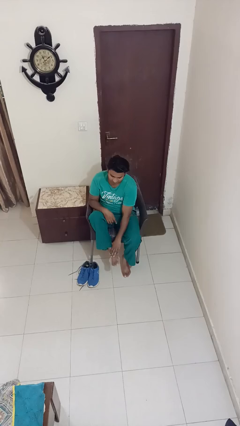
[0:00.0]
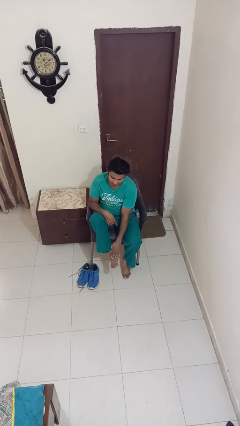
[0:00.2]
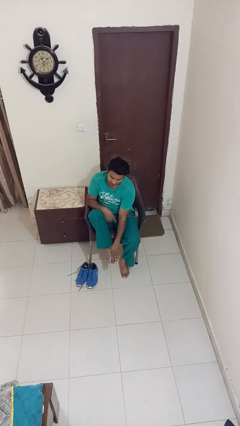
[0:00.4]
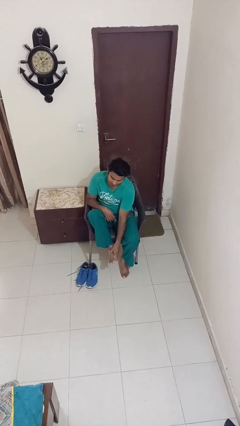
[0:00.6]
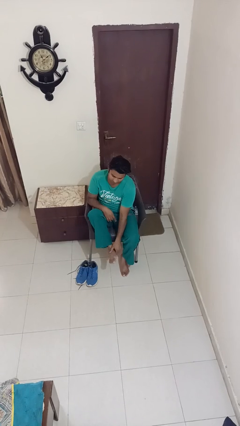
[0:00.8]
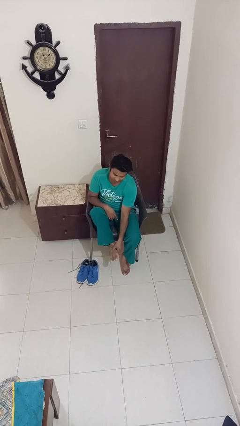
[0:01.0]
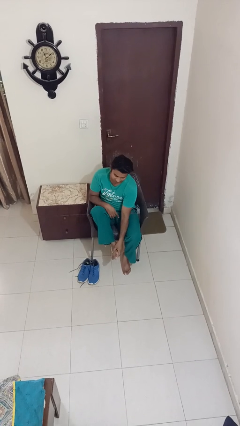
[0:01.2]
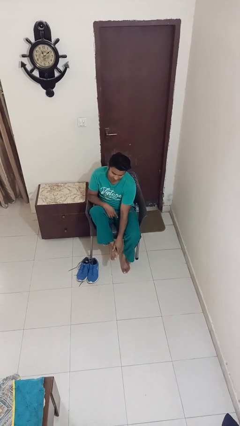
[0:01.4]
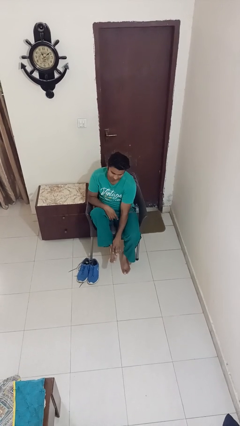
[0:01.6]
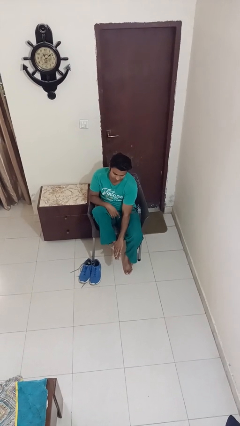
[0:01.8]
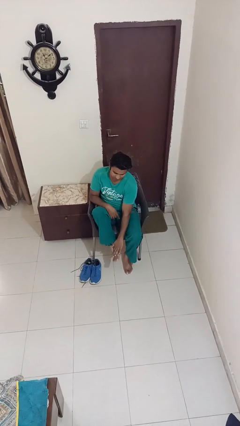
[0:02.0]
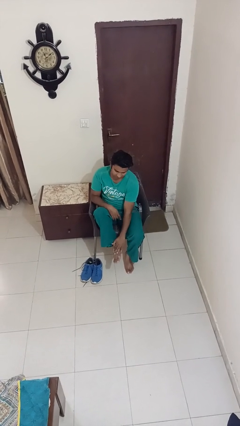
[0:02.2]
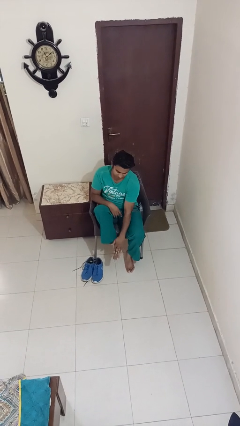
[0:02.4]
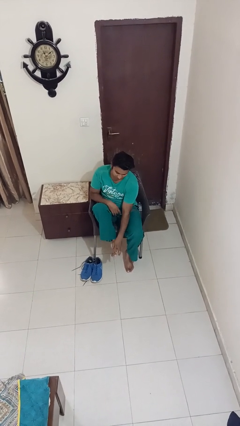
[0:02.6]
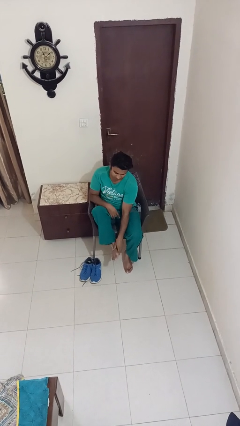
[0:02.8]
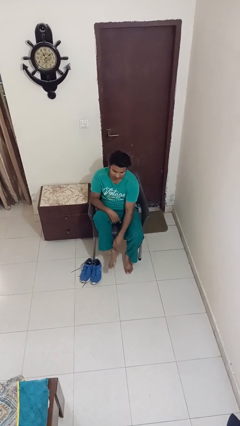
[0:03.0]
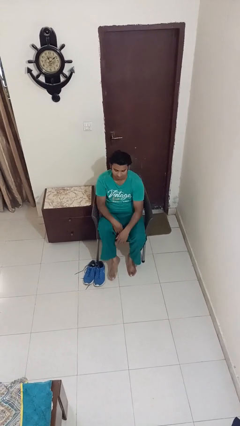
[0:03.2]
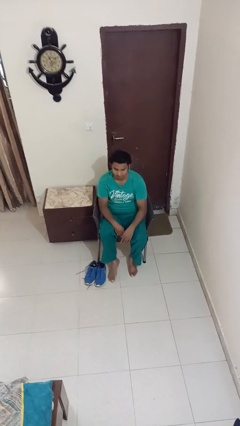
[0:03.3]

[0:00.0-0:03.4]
person rubs foot

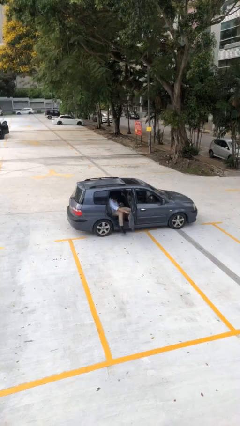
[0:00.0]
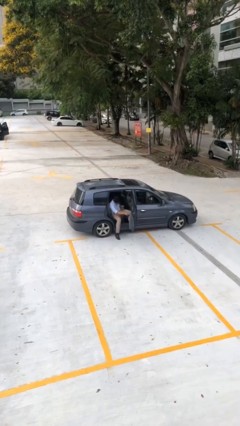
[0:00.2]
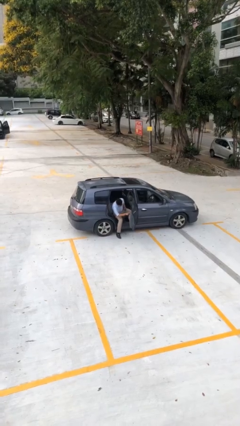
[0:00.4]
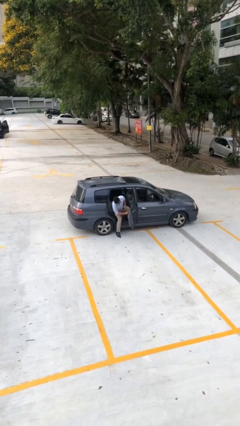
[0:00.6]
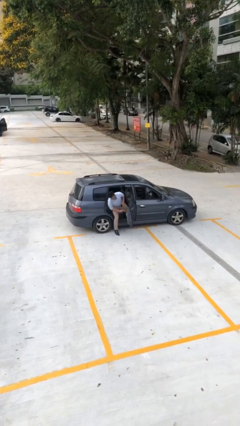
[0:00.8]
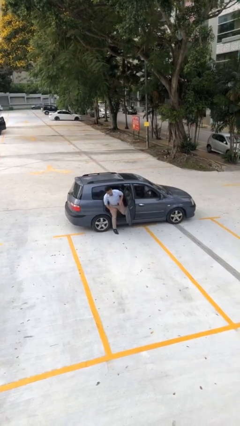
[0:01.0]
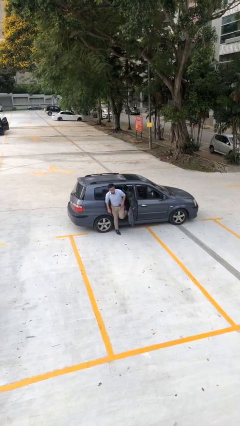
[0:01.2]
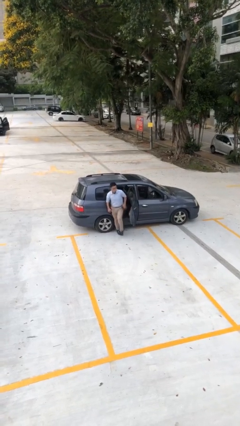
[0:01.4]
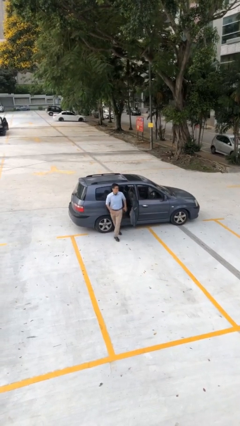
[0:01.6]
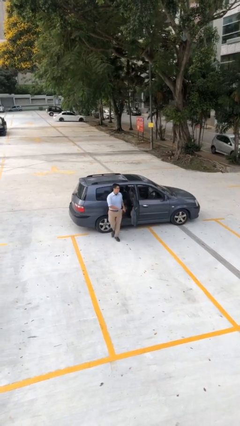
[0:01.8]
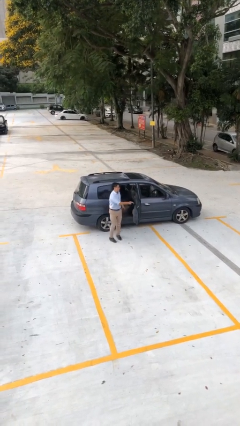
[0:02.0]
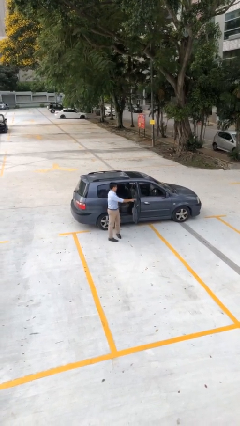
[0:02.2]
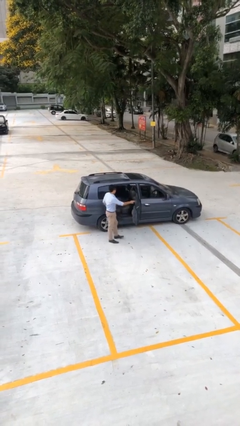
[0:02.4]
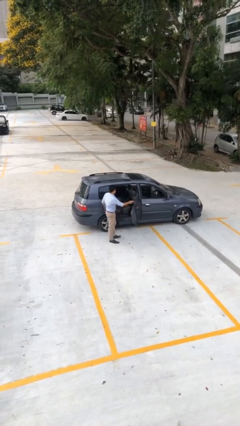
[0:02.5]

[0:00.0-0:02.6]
person exits car

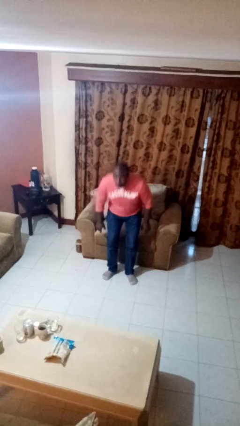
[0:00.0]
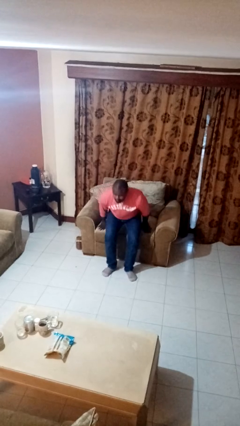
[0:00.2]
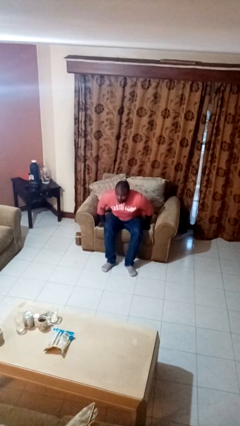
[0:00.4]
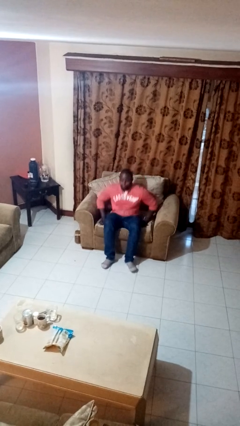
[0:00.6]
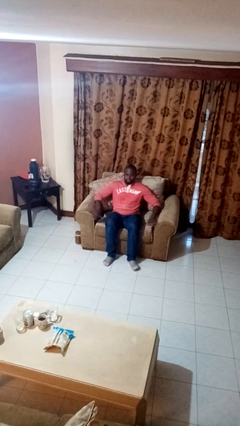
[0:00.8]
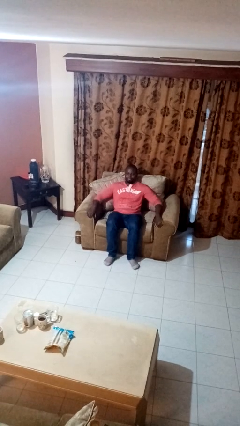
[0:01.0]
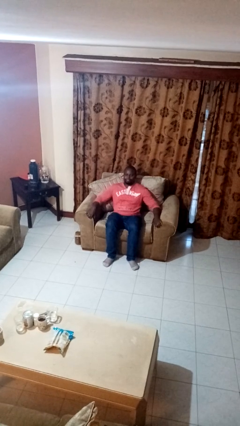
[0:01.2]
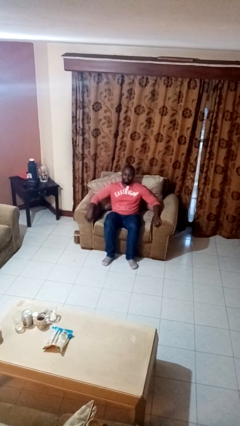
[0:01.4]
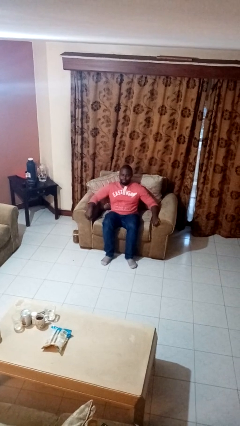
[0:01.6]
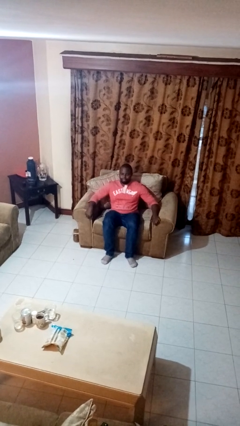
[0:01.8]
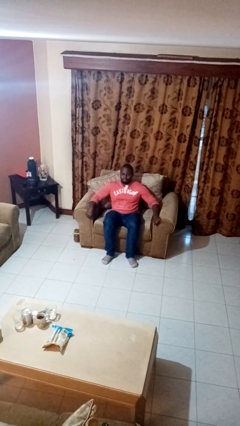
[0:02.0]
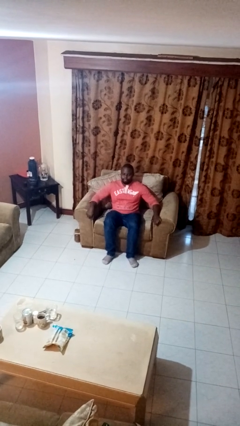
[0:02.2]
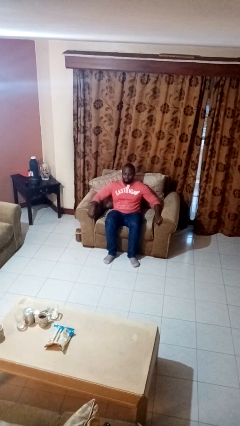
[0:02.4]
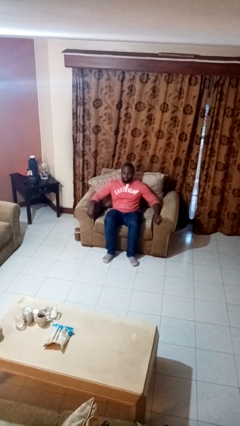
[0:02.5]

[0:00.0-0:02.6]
person sits down

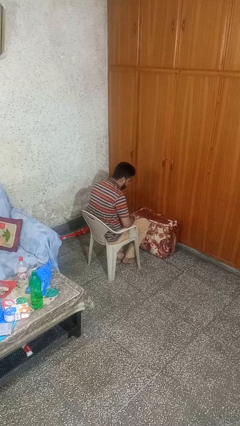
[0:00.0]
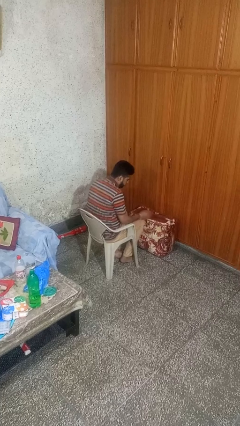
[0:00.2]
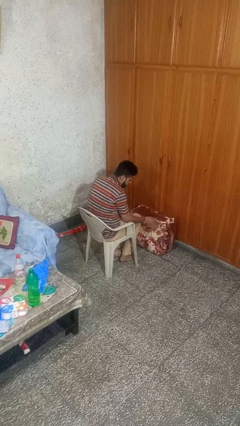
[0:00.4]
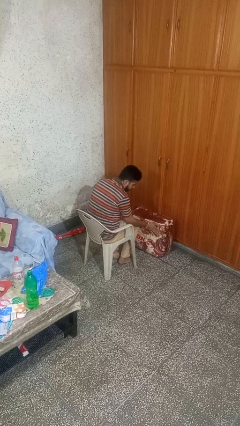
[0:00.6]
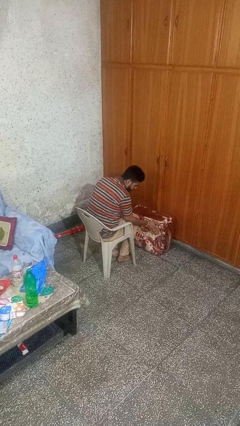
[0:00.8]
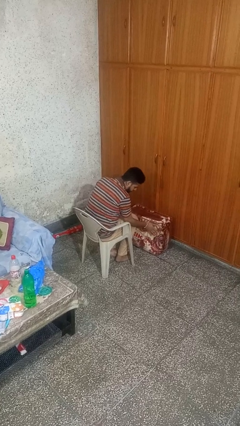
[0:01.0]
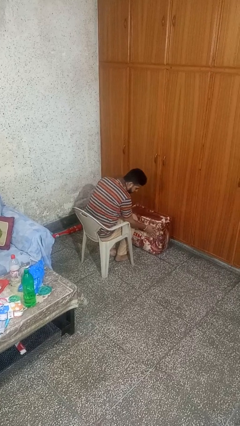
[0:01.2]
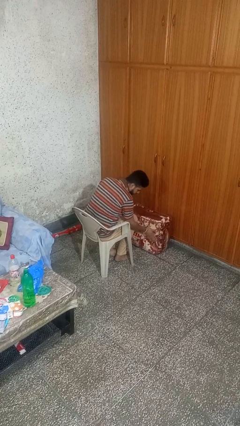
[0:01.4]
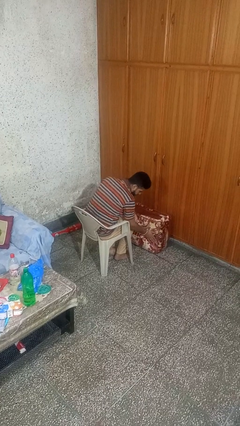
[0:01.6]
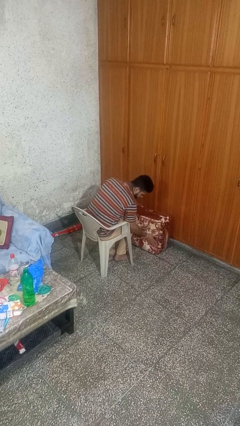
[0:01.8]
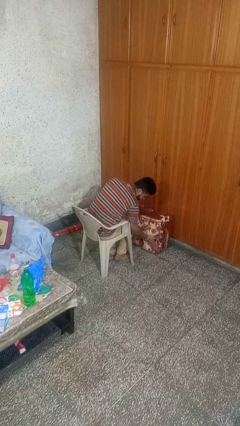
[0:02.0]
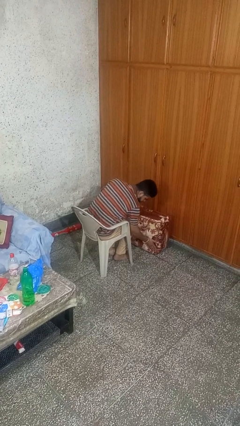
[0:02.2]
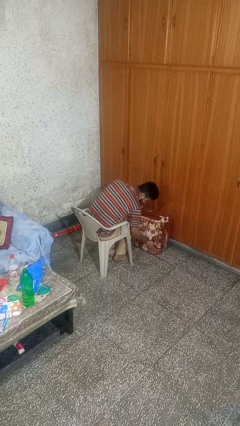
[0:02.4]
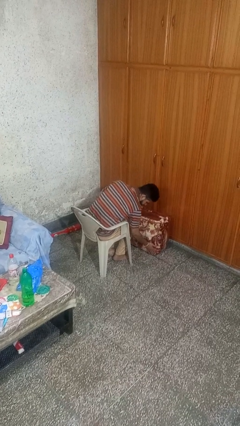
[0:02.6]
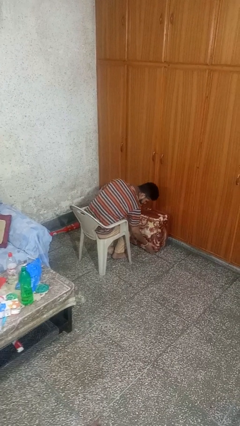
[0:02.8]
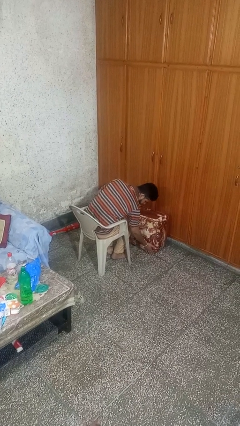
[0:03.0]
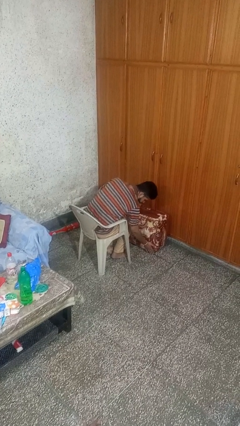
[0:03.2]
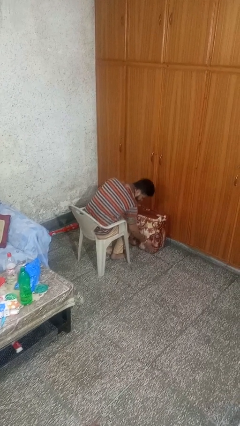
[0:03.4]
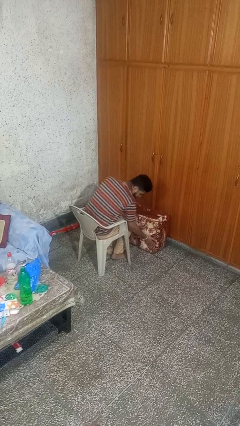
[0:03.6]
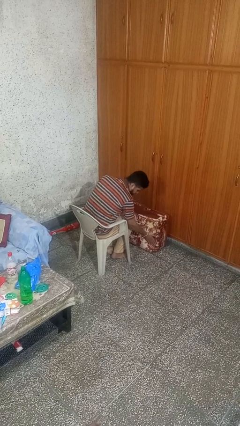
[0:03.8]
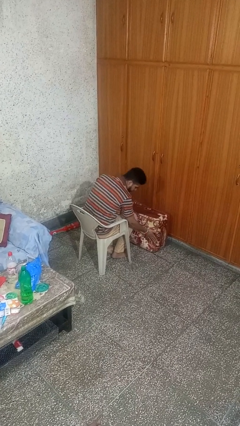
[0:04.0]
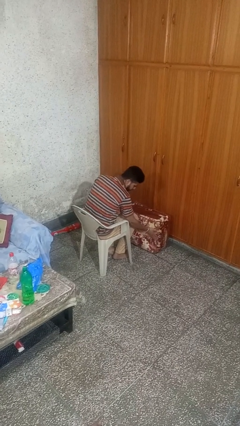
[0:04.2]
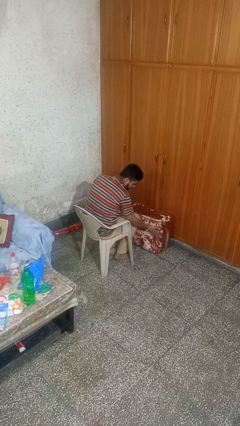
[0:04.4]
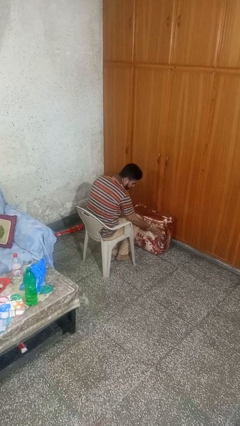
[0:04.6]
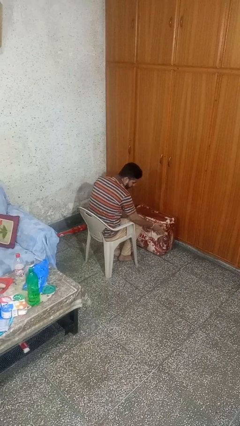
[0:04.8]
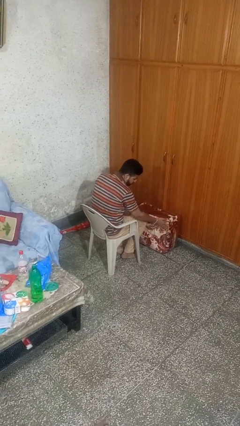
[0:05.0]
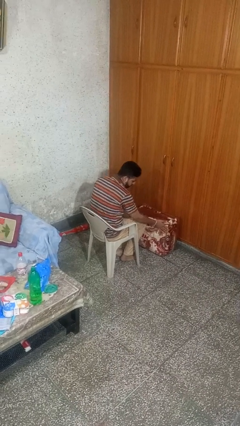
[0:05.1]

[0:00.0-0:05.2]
person waves hand over object

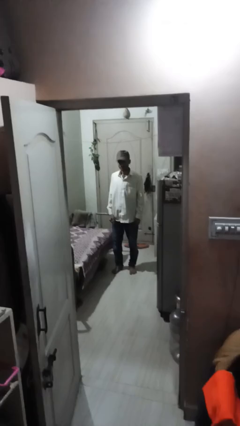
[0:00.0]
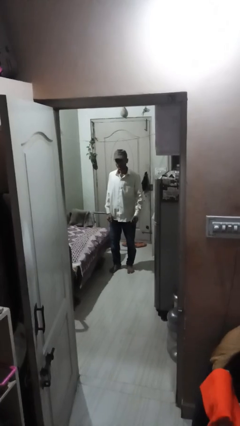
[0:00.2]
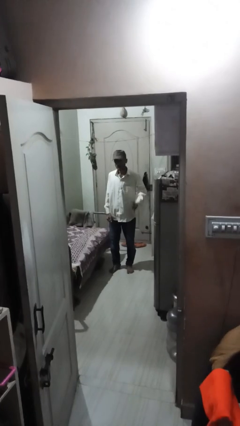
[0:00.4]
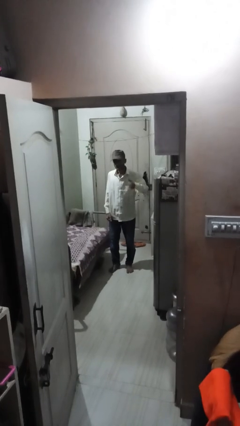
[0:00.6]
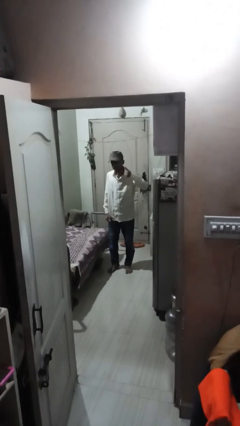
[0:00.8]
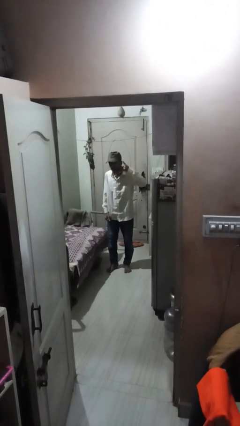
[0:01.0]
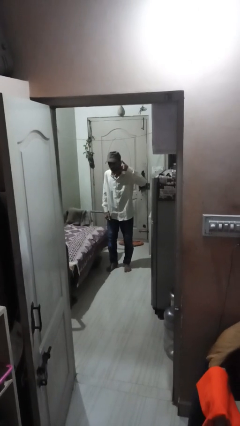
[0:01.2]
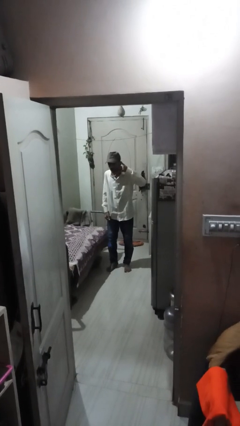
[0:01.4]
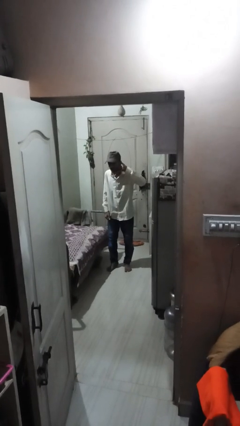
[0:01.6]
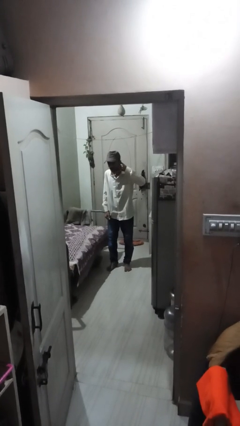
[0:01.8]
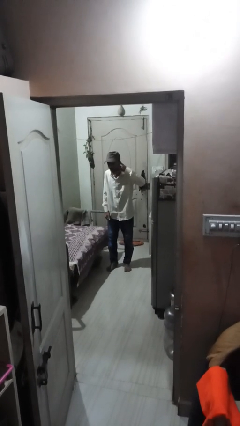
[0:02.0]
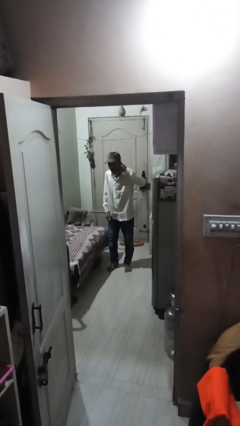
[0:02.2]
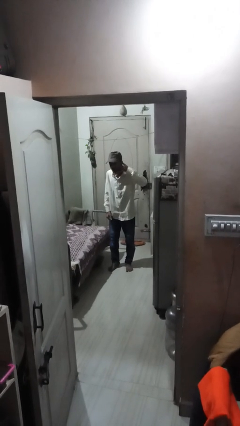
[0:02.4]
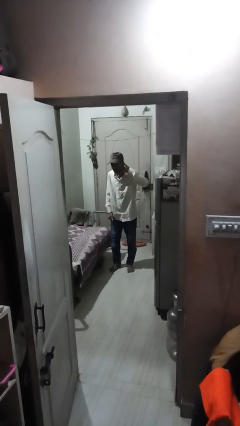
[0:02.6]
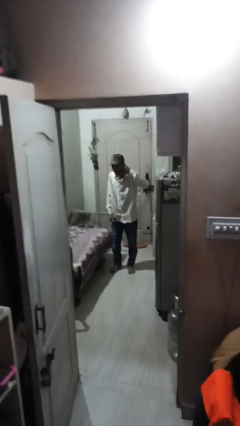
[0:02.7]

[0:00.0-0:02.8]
person gestures call me

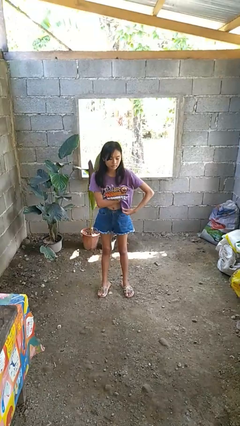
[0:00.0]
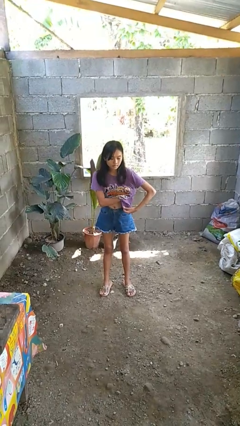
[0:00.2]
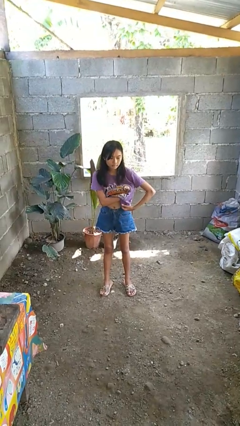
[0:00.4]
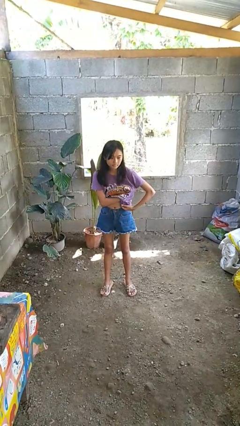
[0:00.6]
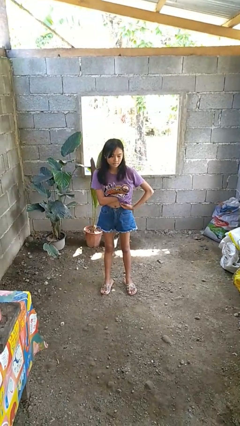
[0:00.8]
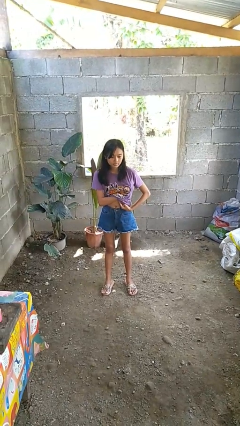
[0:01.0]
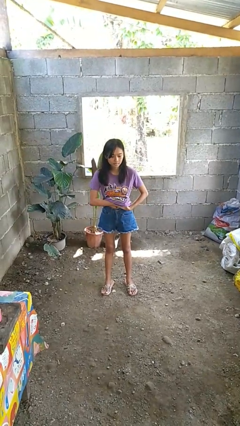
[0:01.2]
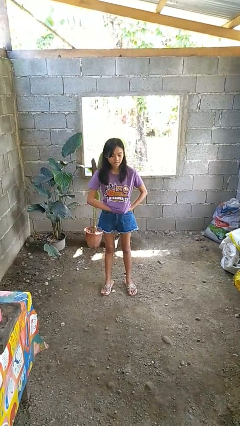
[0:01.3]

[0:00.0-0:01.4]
person applies deodorant
